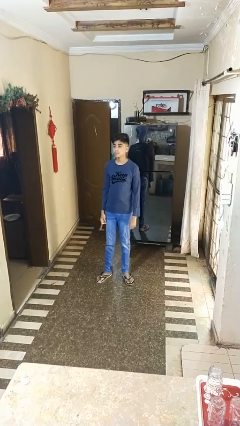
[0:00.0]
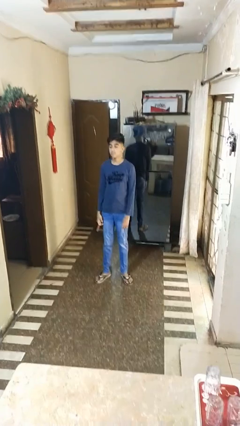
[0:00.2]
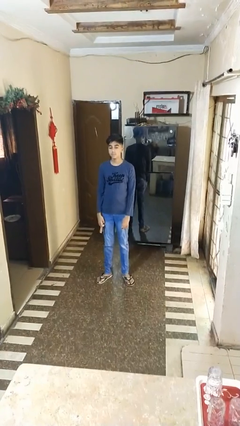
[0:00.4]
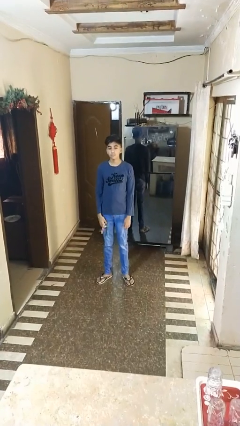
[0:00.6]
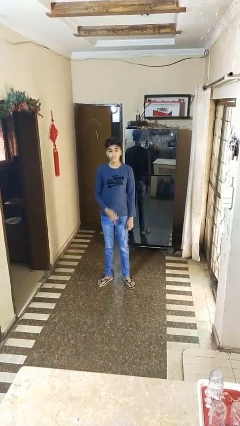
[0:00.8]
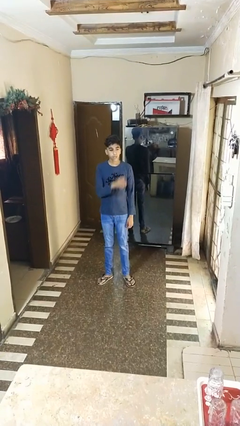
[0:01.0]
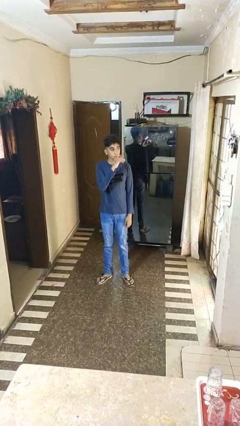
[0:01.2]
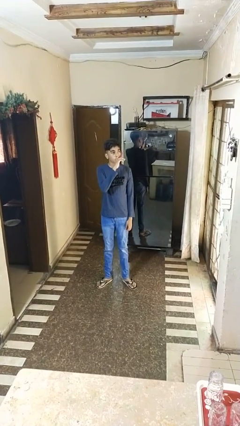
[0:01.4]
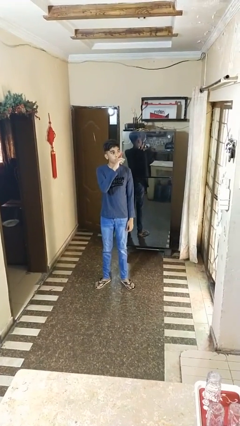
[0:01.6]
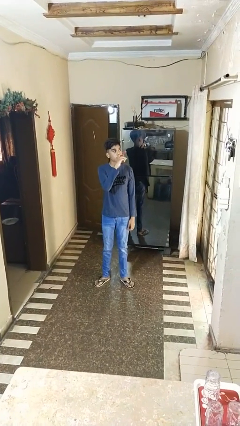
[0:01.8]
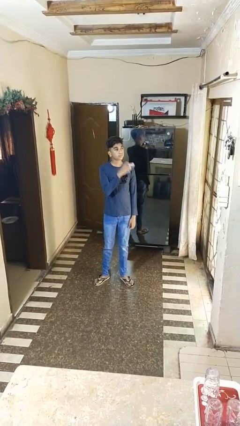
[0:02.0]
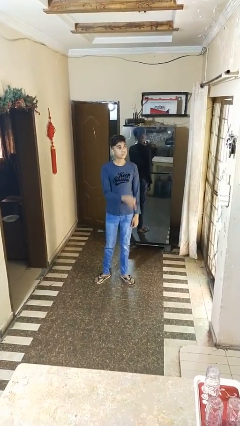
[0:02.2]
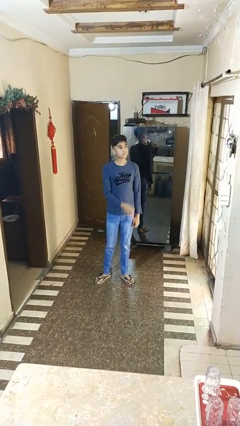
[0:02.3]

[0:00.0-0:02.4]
person vapes

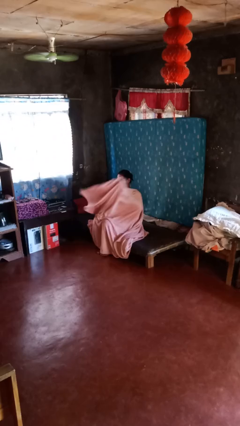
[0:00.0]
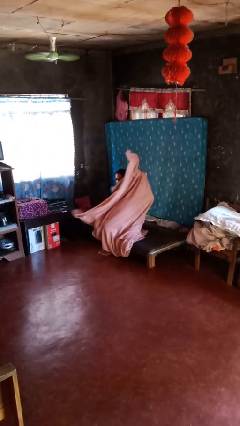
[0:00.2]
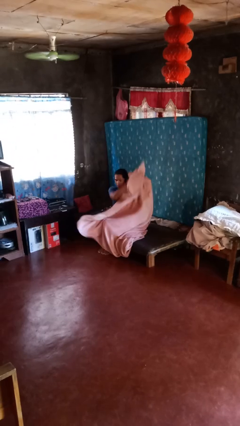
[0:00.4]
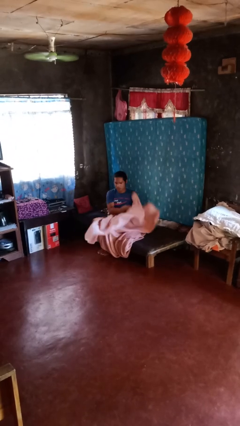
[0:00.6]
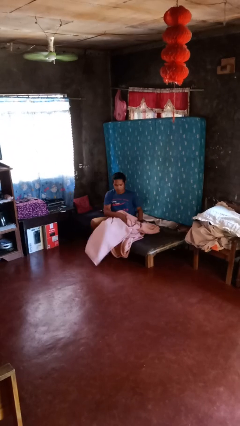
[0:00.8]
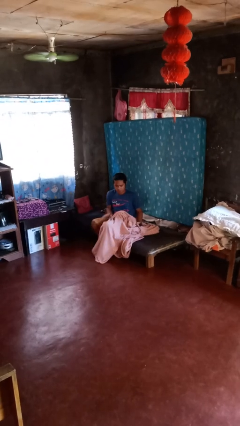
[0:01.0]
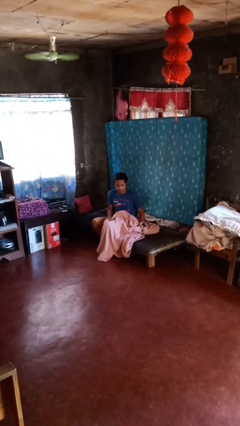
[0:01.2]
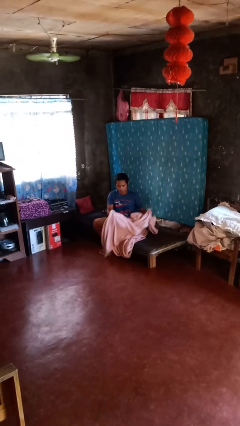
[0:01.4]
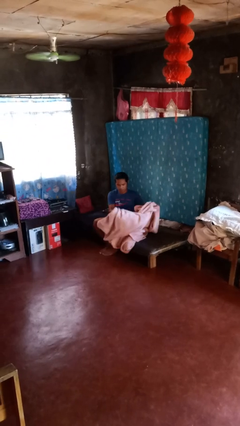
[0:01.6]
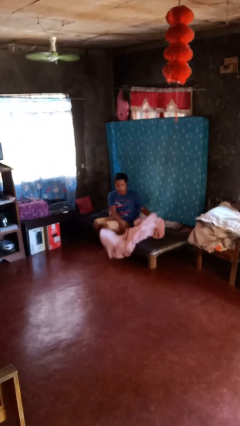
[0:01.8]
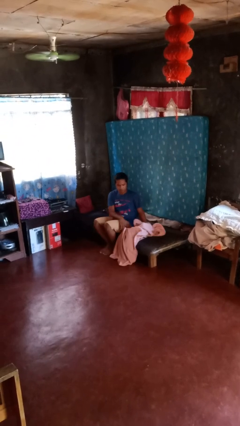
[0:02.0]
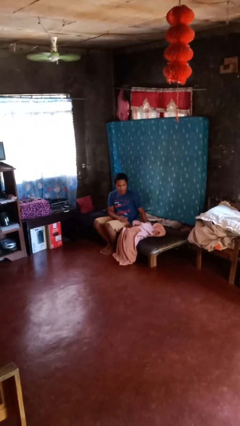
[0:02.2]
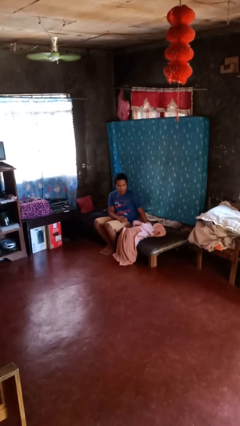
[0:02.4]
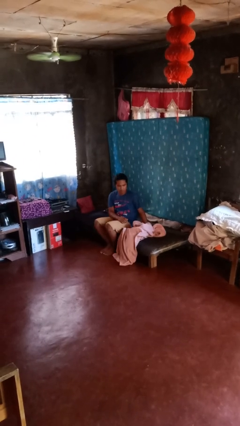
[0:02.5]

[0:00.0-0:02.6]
person uncovers with blanket

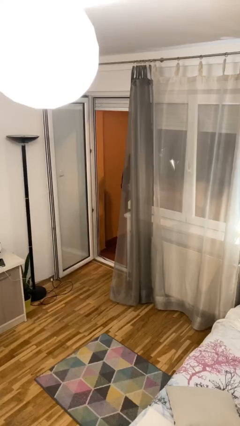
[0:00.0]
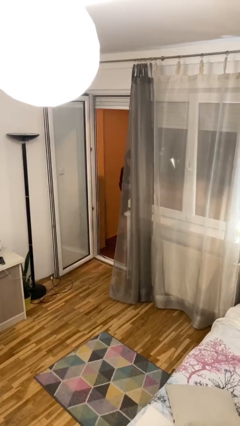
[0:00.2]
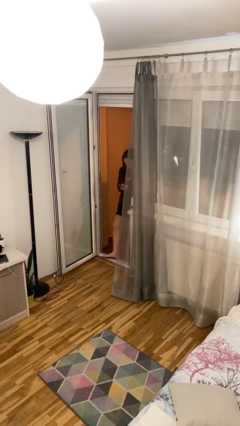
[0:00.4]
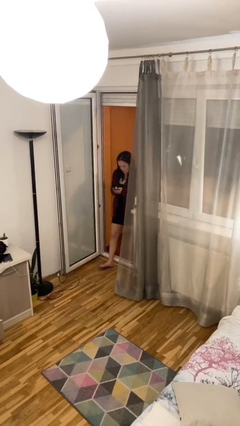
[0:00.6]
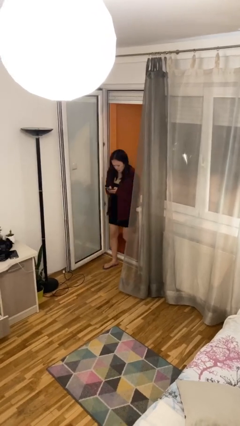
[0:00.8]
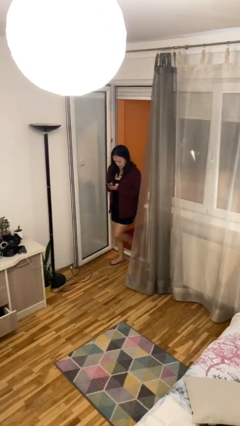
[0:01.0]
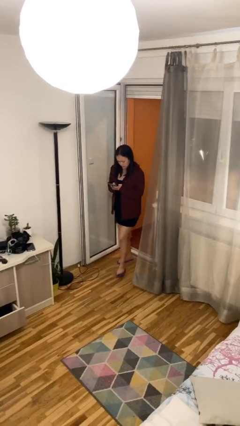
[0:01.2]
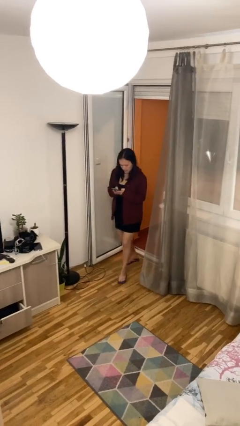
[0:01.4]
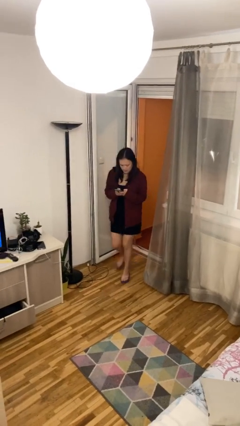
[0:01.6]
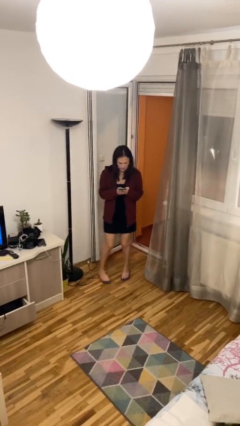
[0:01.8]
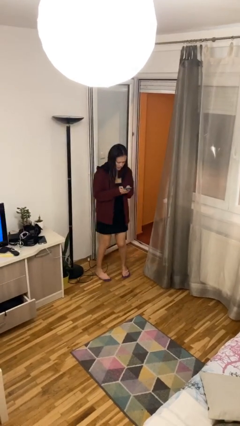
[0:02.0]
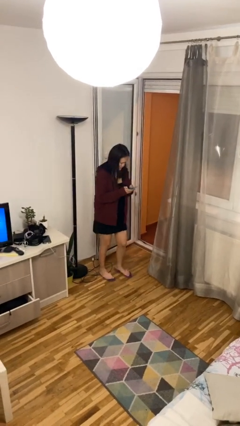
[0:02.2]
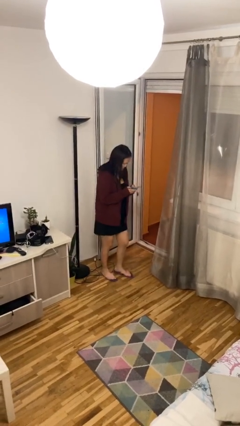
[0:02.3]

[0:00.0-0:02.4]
person enters scene through structure

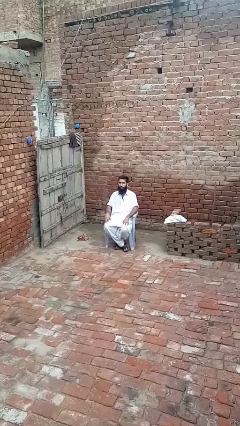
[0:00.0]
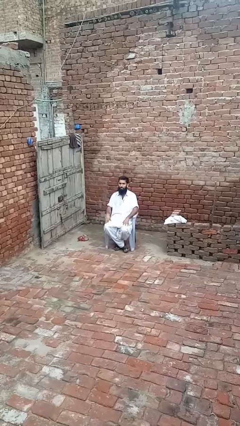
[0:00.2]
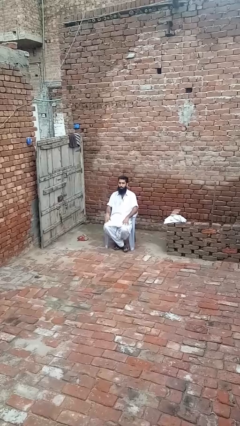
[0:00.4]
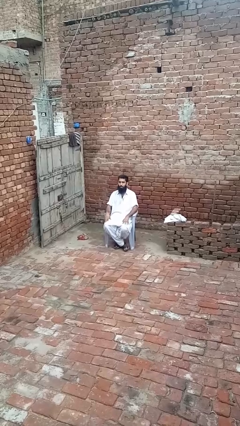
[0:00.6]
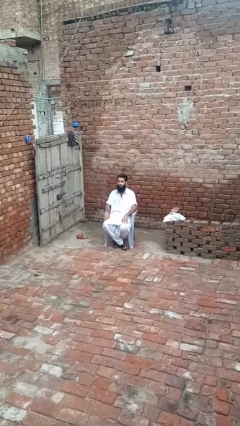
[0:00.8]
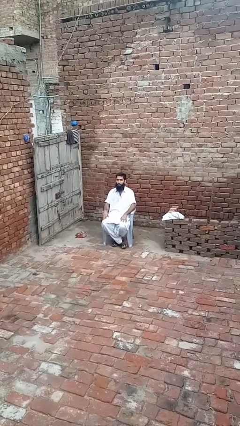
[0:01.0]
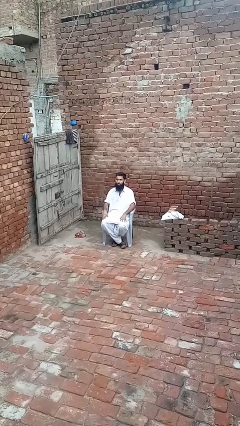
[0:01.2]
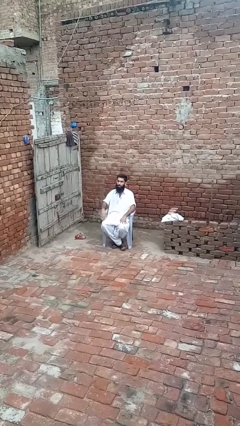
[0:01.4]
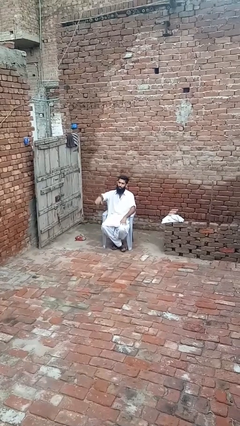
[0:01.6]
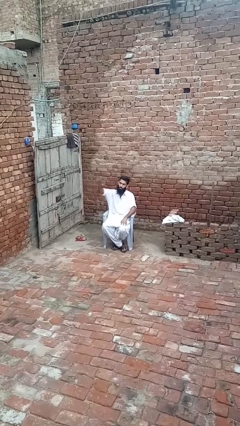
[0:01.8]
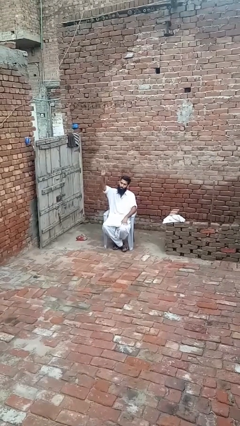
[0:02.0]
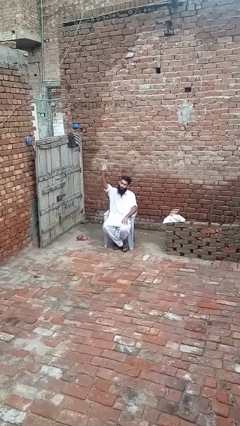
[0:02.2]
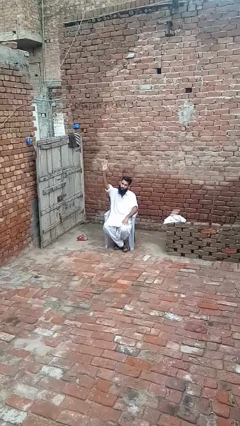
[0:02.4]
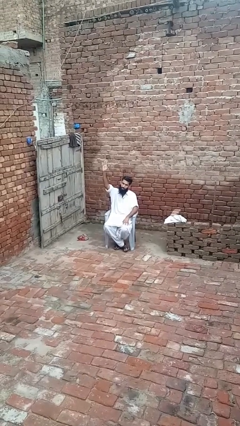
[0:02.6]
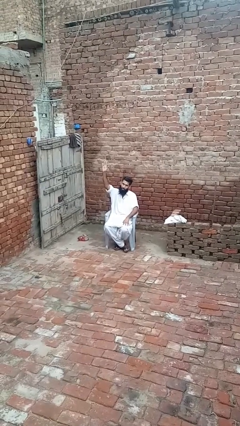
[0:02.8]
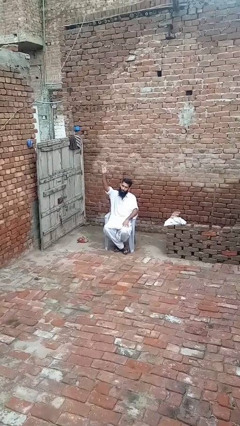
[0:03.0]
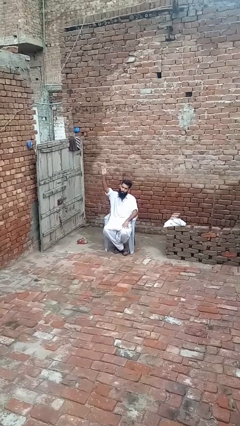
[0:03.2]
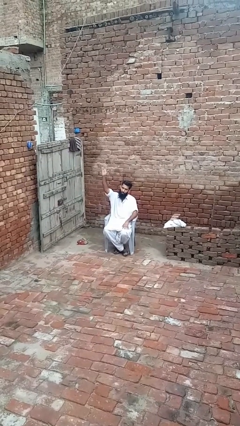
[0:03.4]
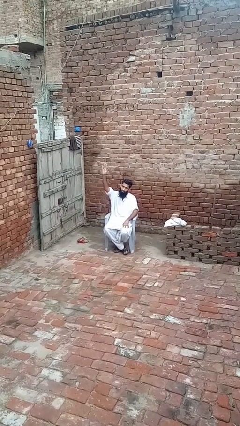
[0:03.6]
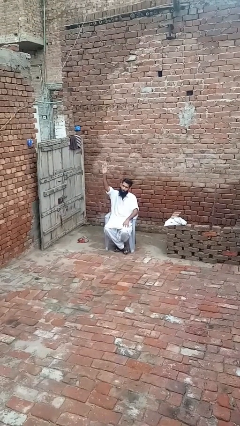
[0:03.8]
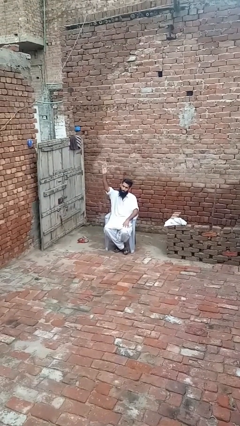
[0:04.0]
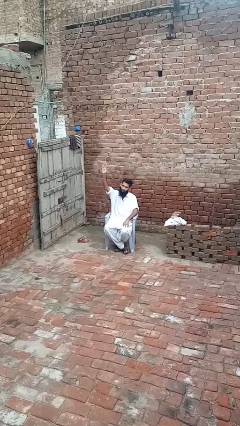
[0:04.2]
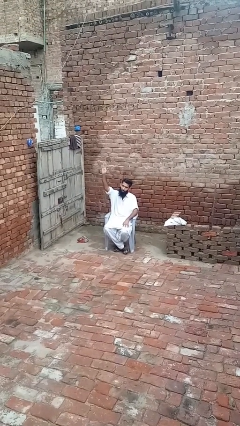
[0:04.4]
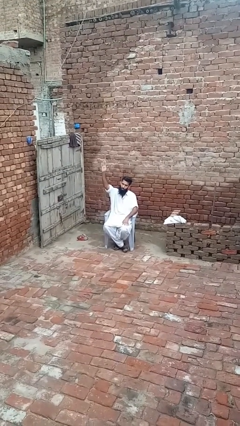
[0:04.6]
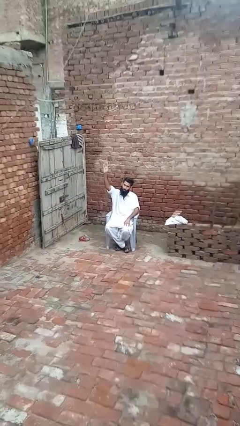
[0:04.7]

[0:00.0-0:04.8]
person gestures raise hand

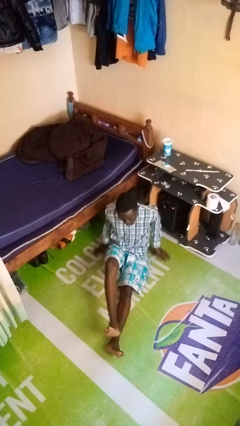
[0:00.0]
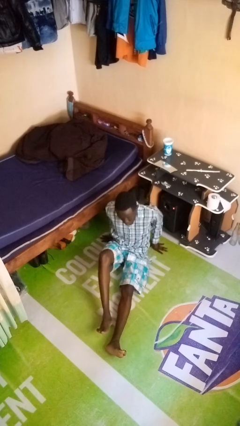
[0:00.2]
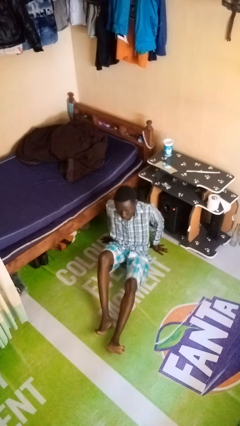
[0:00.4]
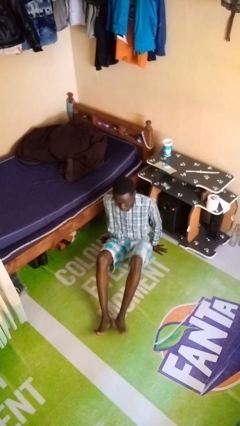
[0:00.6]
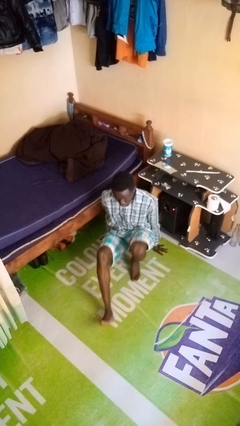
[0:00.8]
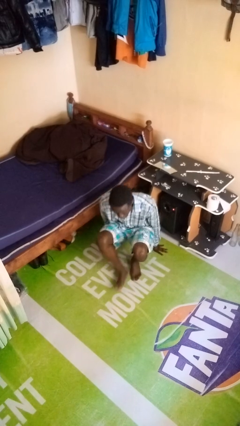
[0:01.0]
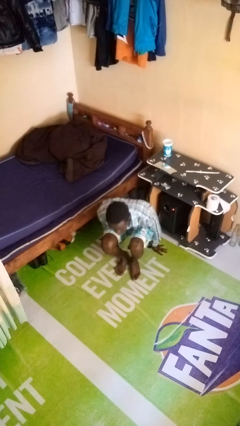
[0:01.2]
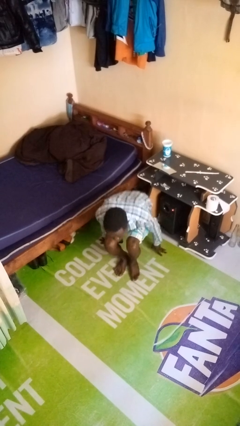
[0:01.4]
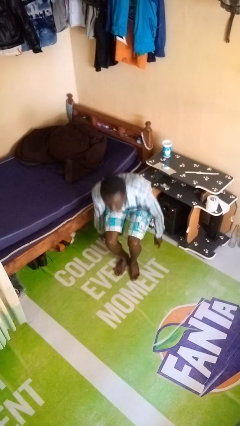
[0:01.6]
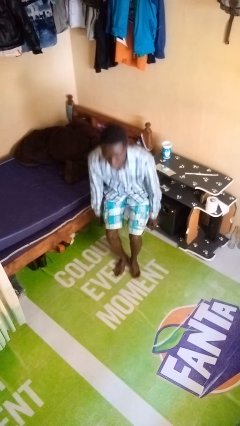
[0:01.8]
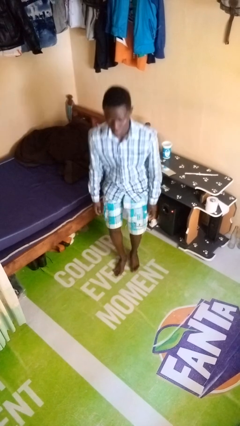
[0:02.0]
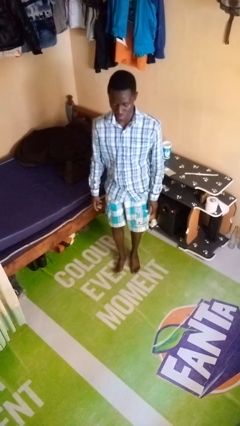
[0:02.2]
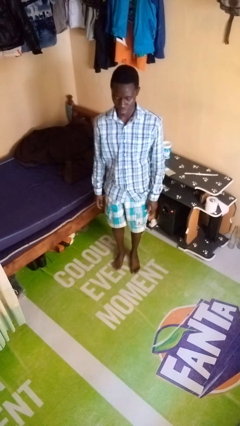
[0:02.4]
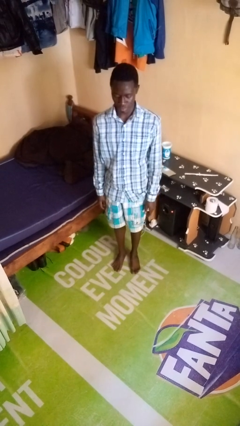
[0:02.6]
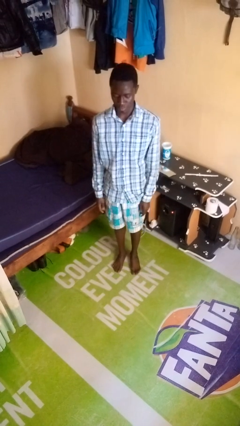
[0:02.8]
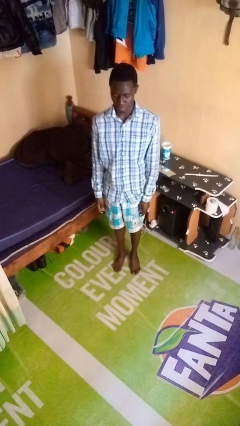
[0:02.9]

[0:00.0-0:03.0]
person stands up from floor

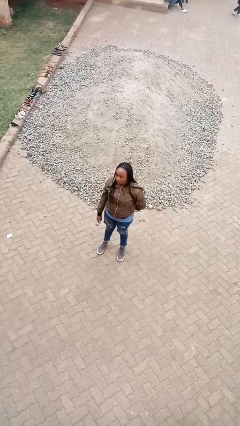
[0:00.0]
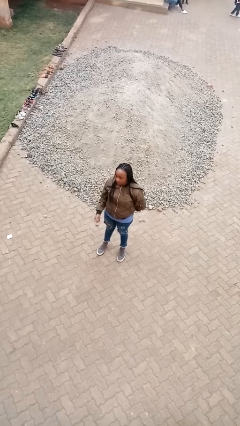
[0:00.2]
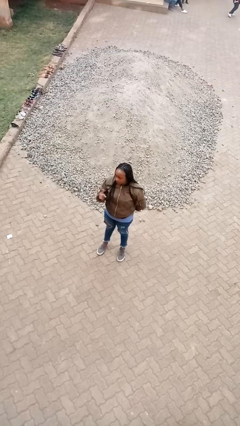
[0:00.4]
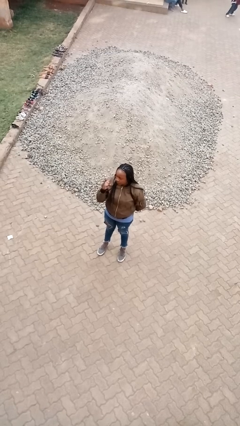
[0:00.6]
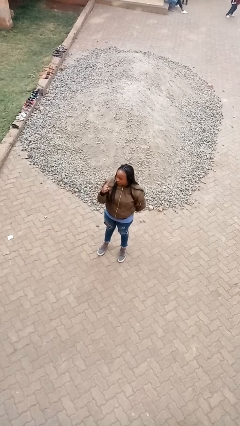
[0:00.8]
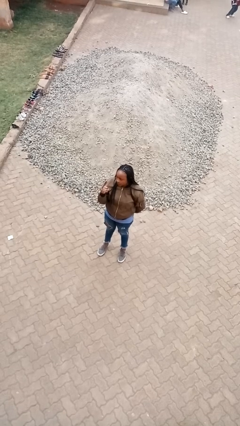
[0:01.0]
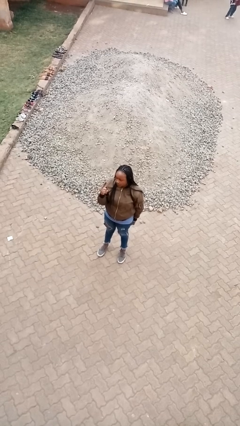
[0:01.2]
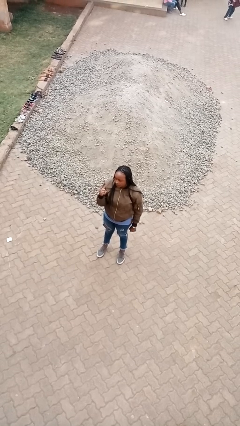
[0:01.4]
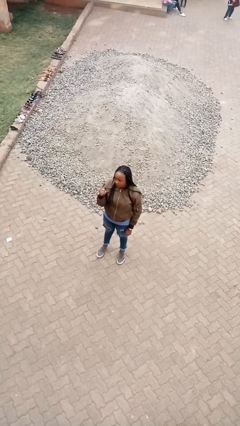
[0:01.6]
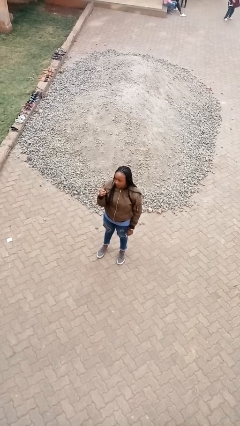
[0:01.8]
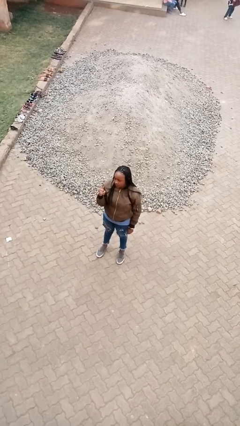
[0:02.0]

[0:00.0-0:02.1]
person gestures number one

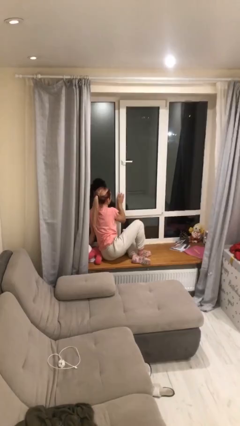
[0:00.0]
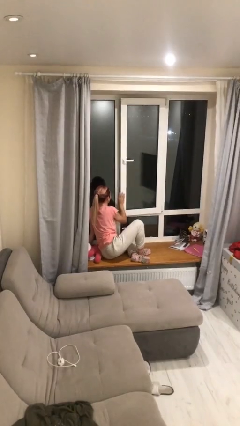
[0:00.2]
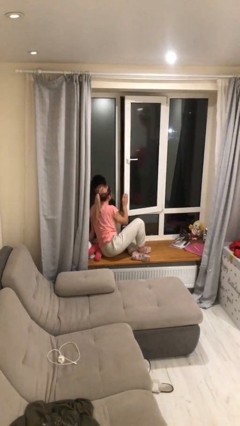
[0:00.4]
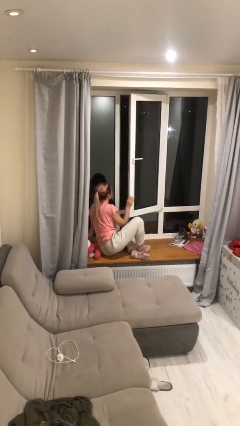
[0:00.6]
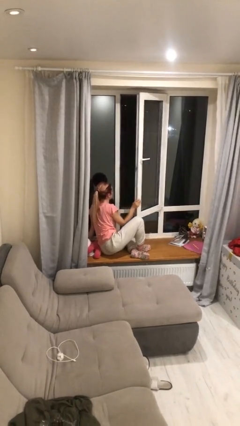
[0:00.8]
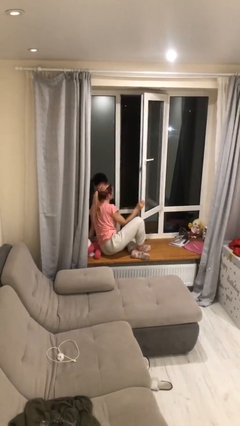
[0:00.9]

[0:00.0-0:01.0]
person opens home window
